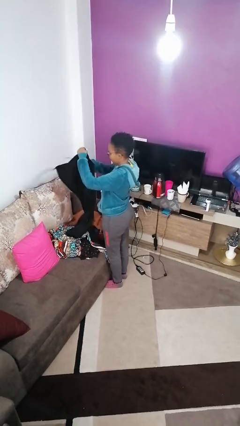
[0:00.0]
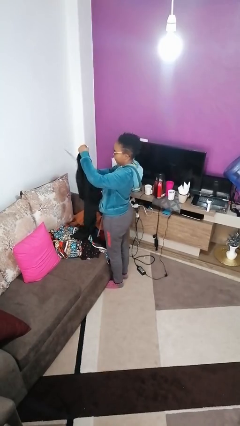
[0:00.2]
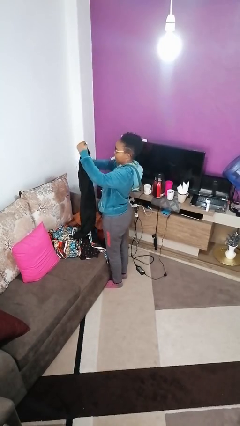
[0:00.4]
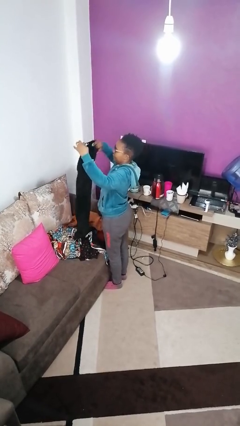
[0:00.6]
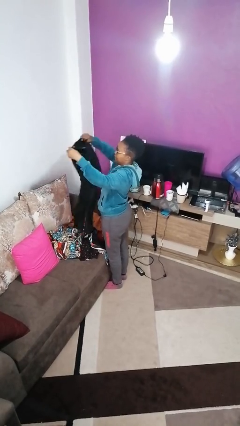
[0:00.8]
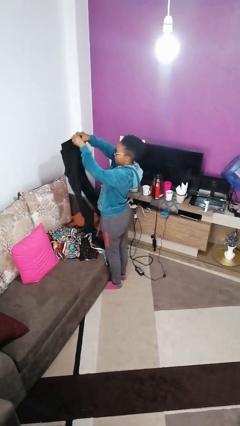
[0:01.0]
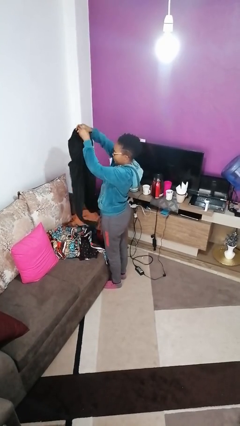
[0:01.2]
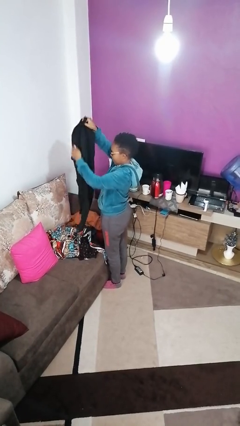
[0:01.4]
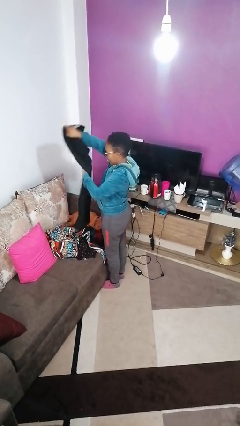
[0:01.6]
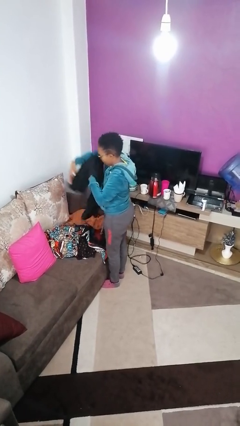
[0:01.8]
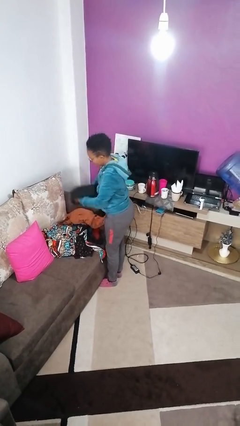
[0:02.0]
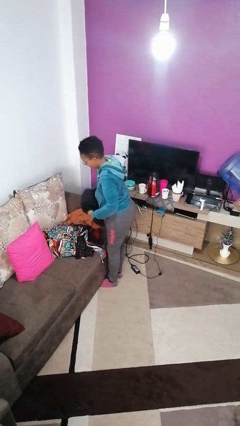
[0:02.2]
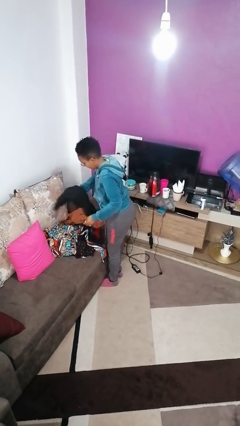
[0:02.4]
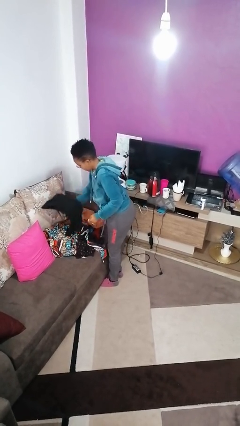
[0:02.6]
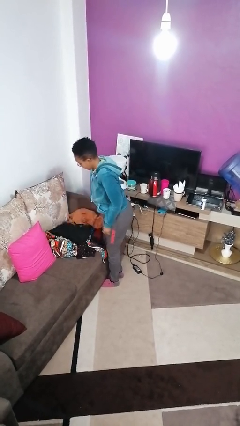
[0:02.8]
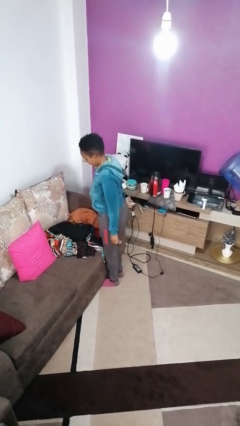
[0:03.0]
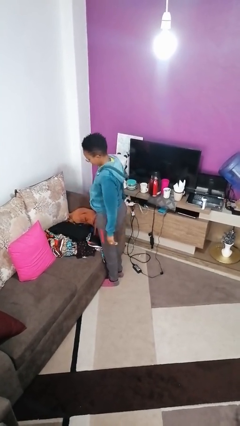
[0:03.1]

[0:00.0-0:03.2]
person folds pants

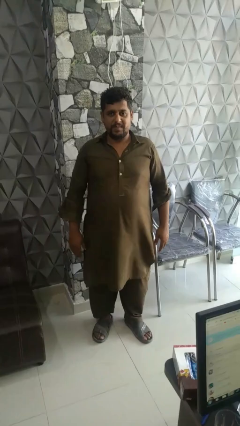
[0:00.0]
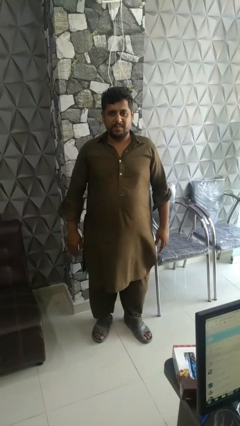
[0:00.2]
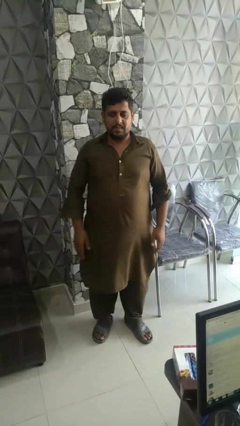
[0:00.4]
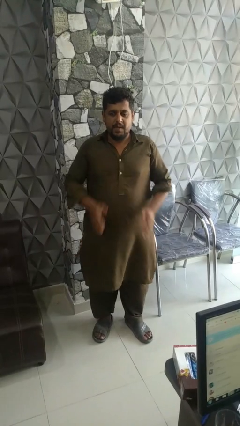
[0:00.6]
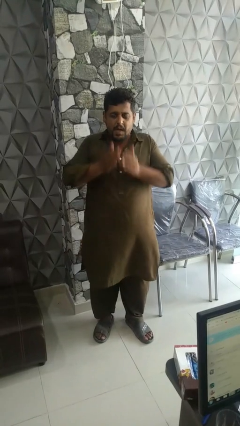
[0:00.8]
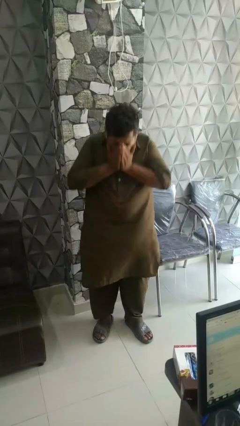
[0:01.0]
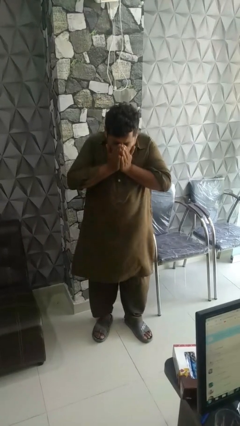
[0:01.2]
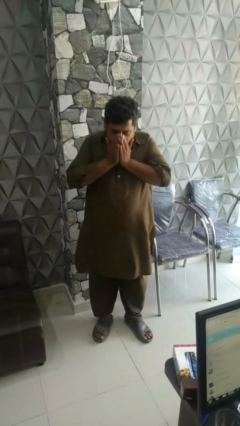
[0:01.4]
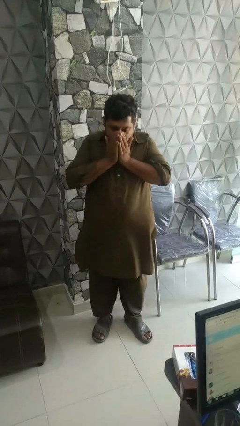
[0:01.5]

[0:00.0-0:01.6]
person sneezes into hand

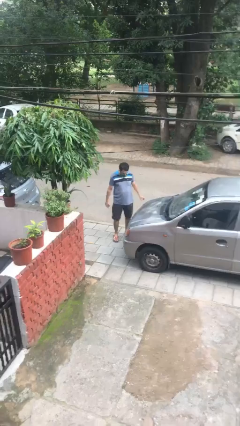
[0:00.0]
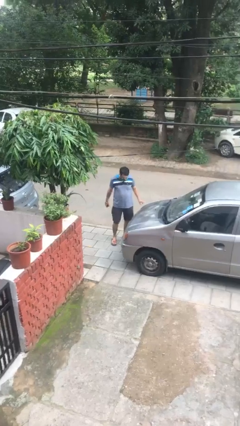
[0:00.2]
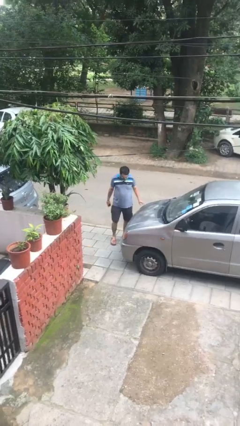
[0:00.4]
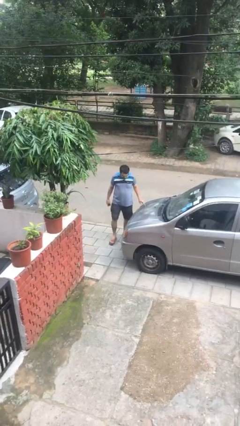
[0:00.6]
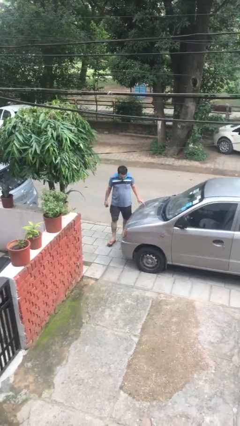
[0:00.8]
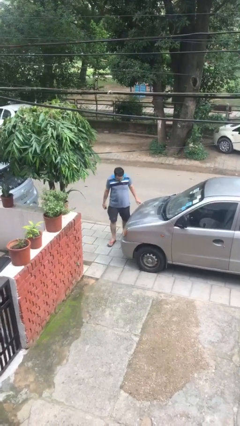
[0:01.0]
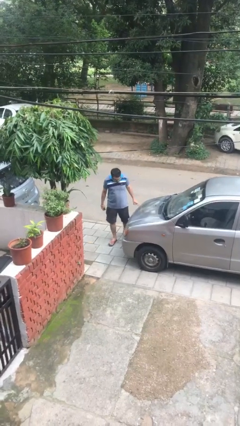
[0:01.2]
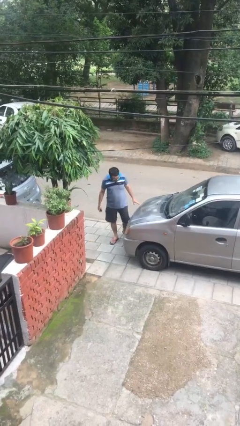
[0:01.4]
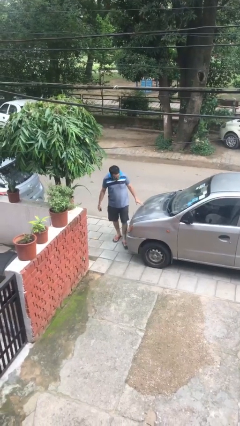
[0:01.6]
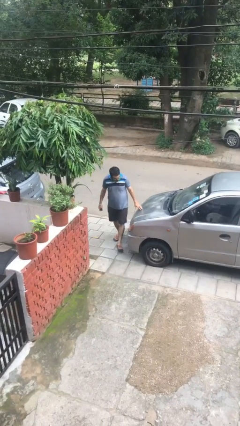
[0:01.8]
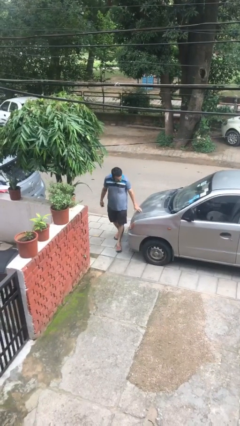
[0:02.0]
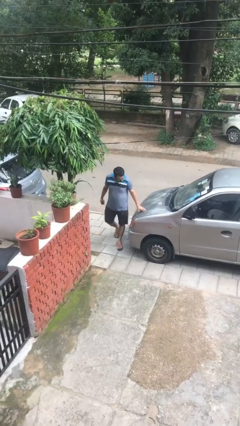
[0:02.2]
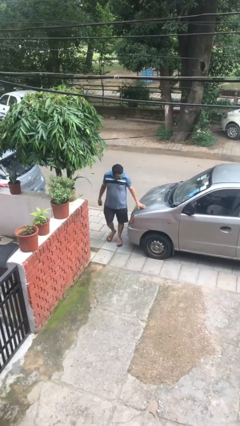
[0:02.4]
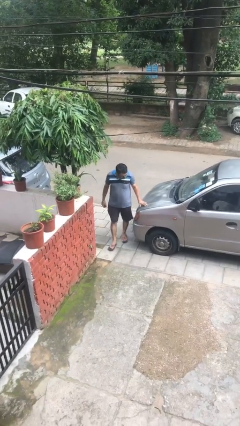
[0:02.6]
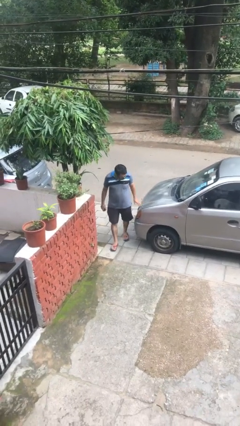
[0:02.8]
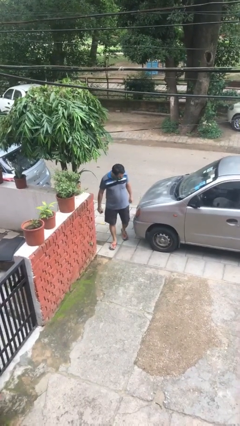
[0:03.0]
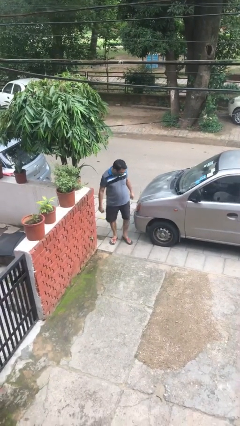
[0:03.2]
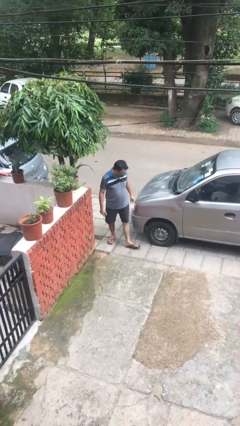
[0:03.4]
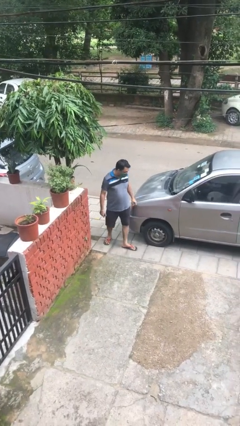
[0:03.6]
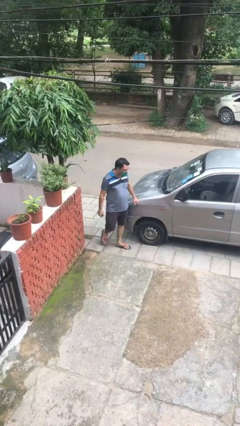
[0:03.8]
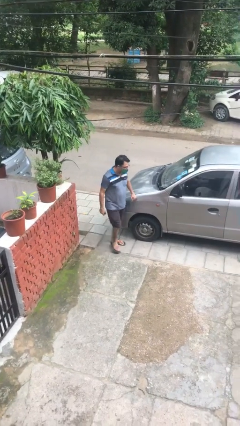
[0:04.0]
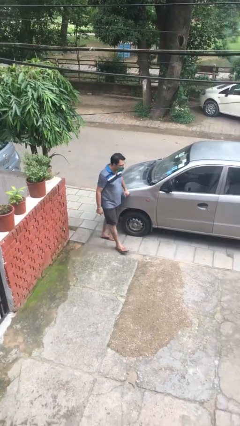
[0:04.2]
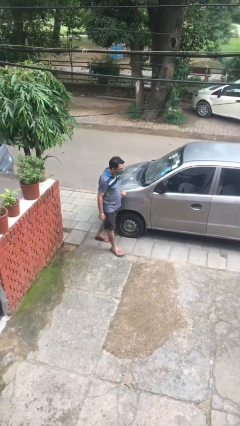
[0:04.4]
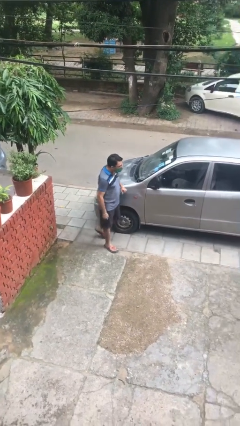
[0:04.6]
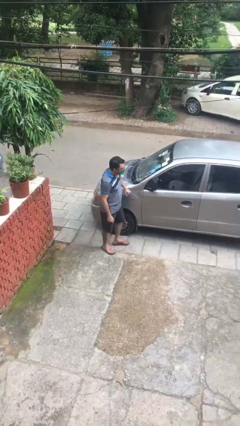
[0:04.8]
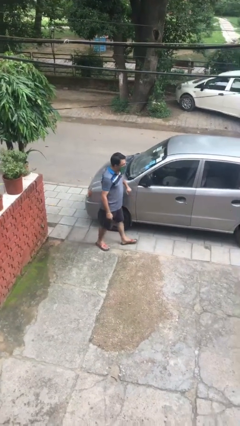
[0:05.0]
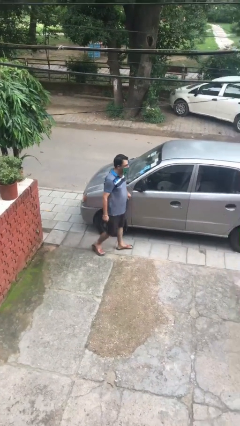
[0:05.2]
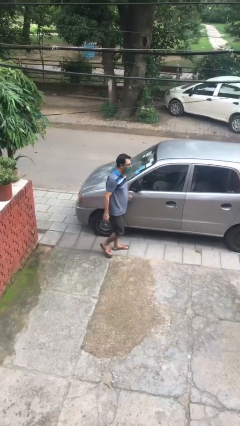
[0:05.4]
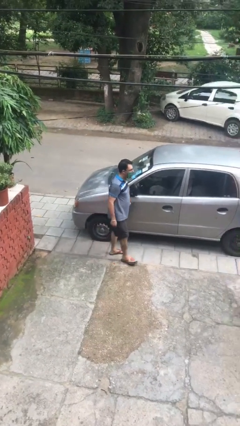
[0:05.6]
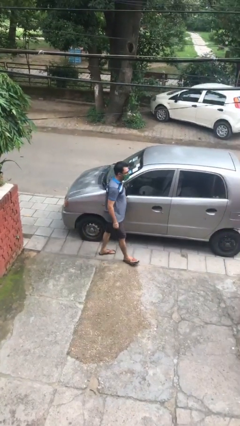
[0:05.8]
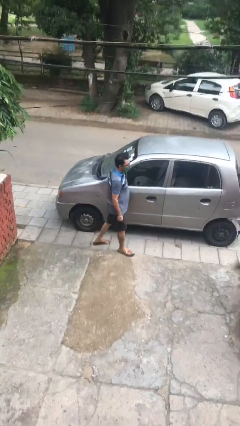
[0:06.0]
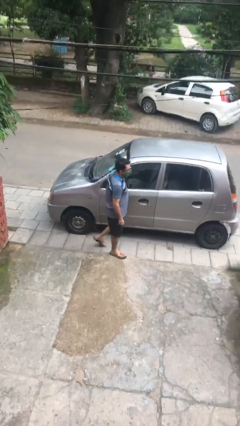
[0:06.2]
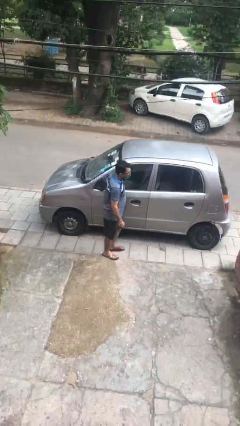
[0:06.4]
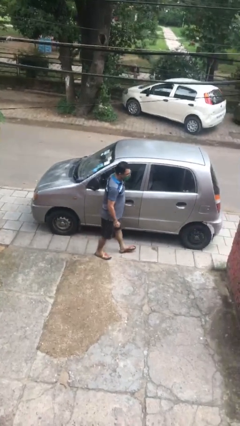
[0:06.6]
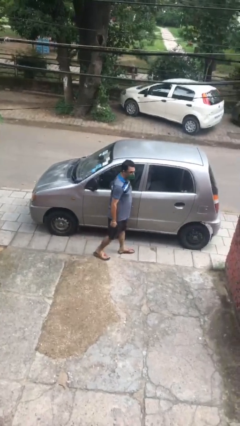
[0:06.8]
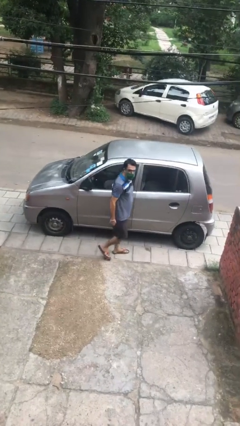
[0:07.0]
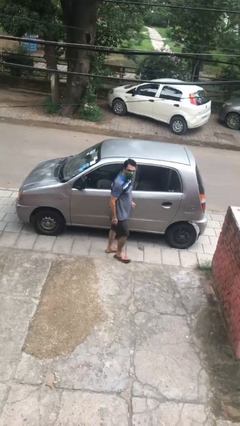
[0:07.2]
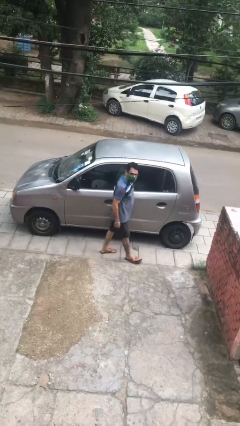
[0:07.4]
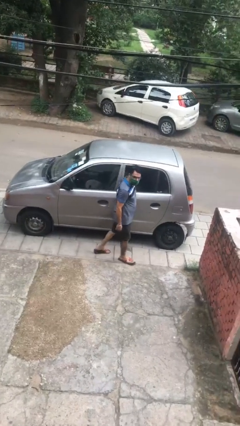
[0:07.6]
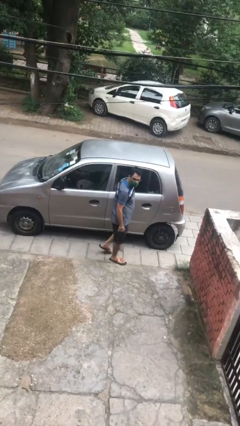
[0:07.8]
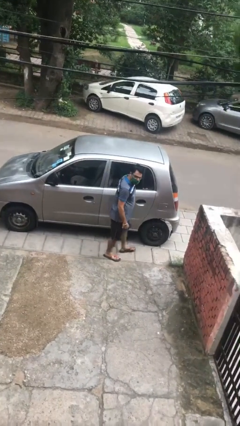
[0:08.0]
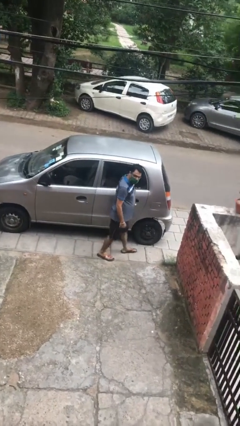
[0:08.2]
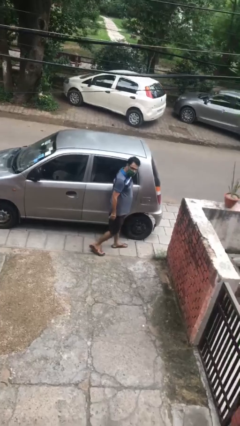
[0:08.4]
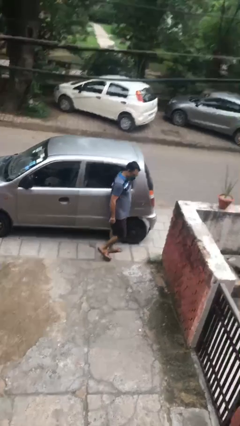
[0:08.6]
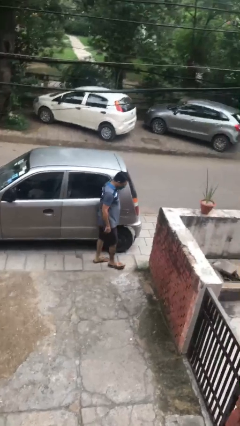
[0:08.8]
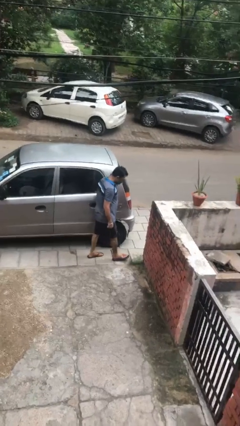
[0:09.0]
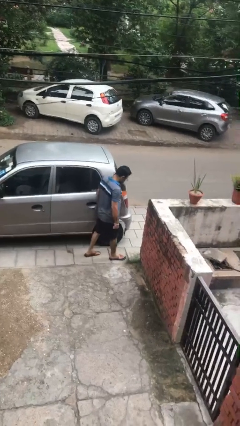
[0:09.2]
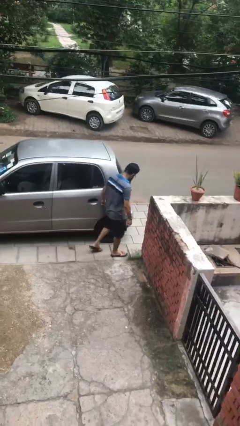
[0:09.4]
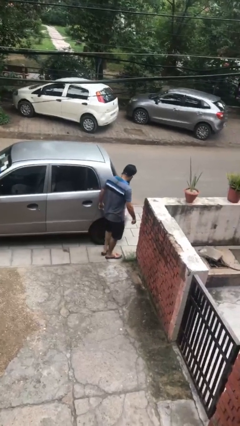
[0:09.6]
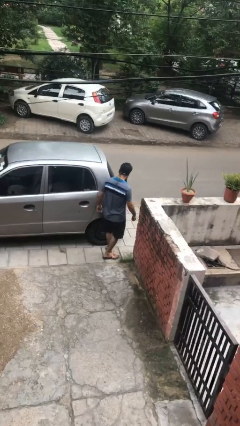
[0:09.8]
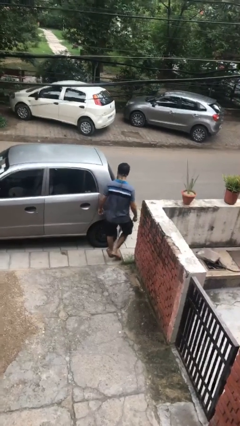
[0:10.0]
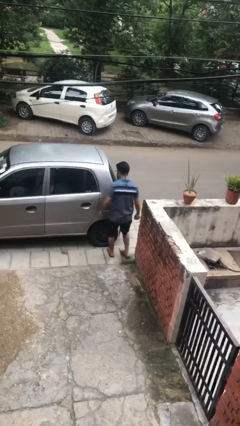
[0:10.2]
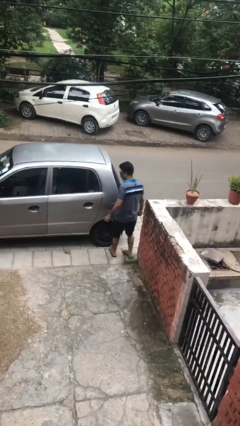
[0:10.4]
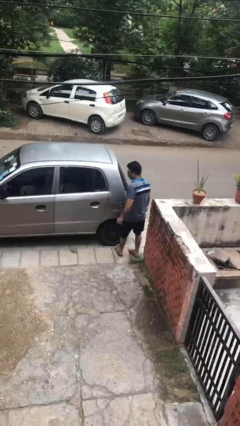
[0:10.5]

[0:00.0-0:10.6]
person walks around car

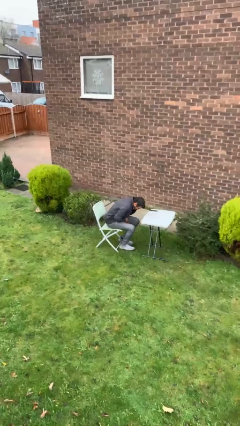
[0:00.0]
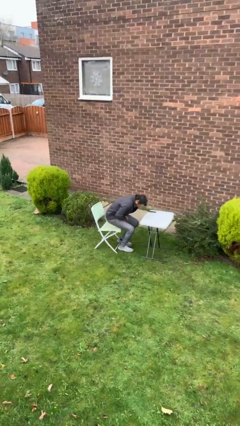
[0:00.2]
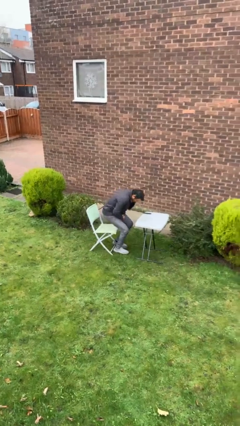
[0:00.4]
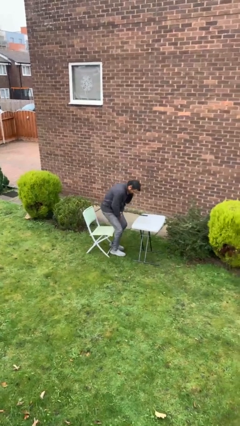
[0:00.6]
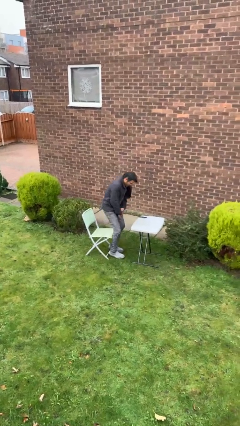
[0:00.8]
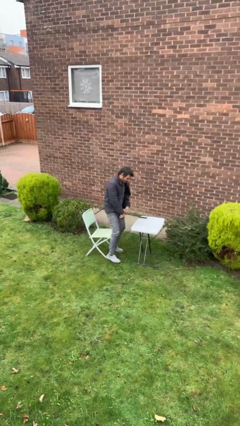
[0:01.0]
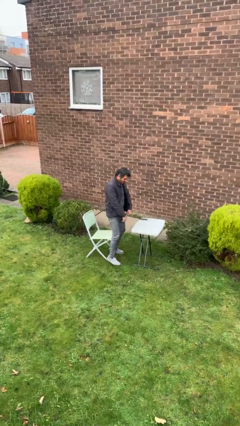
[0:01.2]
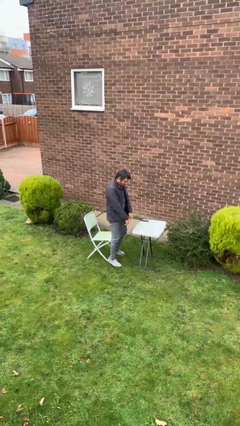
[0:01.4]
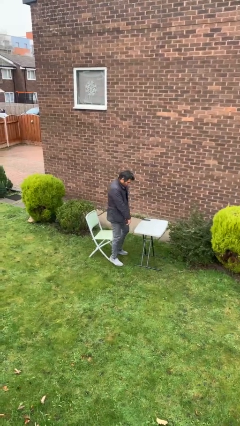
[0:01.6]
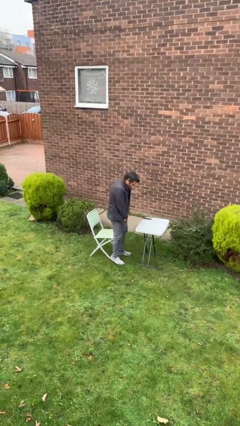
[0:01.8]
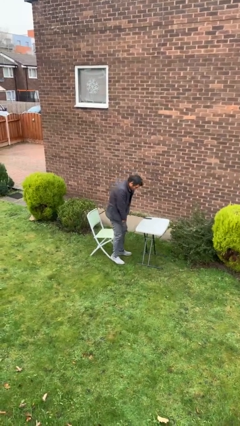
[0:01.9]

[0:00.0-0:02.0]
person stands up
